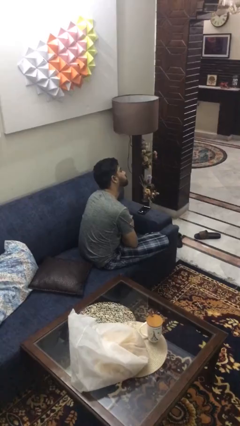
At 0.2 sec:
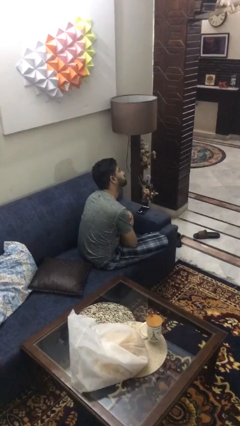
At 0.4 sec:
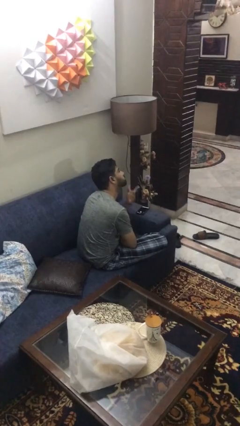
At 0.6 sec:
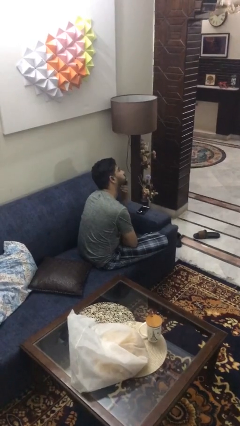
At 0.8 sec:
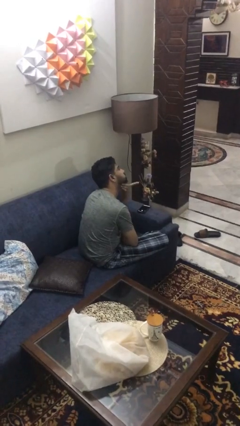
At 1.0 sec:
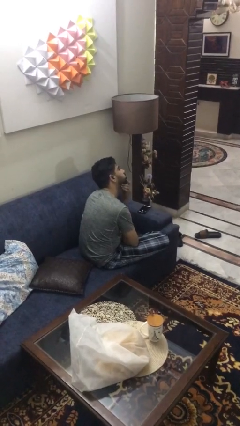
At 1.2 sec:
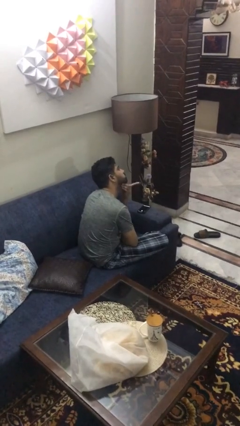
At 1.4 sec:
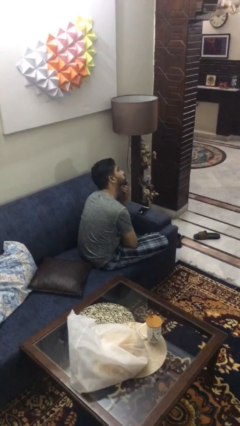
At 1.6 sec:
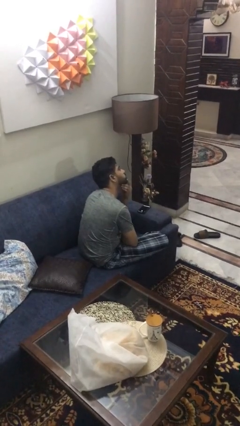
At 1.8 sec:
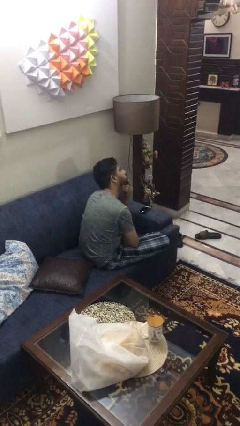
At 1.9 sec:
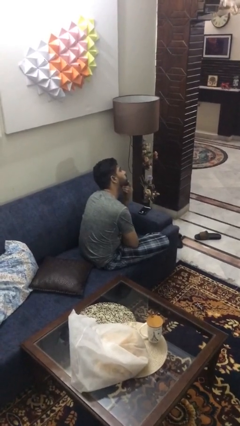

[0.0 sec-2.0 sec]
person strokes chin

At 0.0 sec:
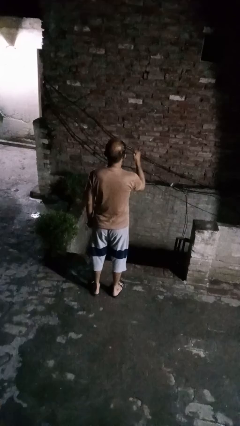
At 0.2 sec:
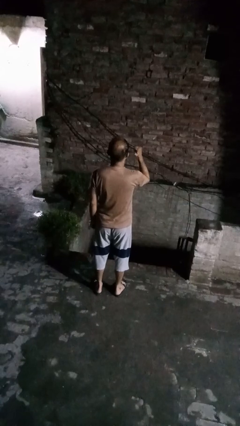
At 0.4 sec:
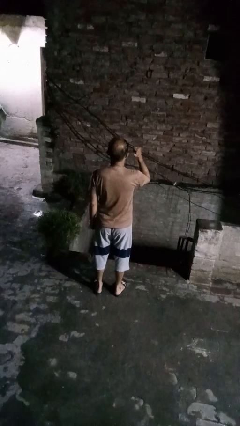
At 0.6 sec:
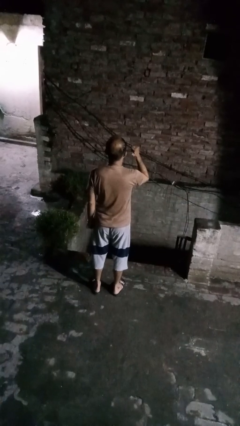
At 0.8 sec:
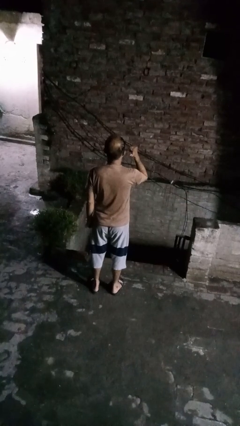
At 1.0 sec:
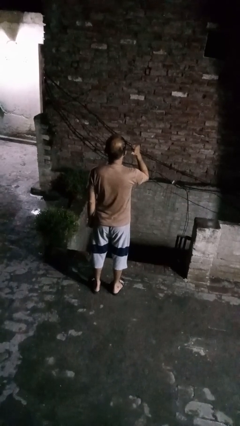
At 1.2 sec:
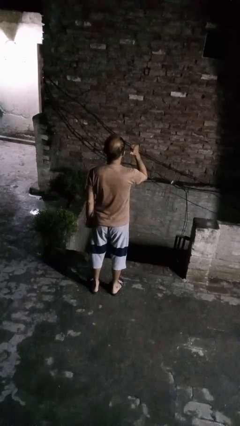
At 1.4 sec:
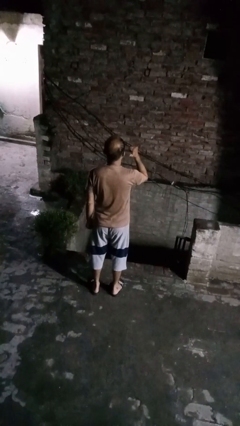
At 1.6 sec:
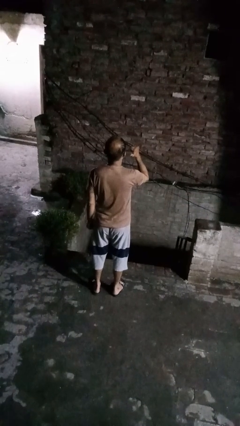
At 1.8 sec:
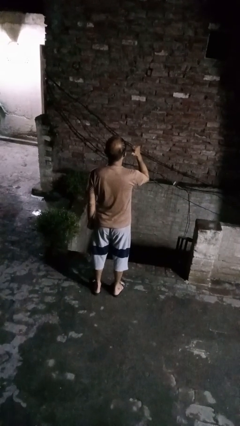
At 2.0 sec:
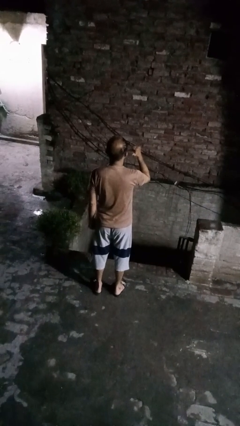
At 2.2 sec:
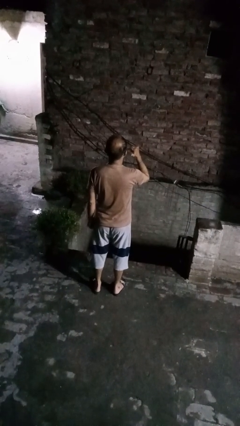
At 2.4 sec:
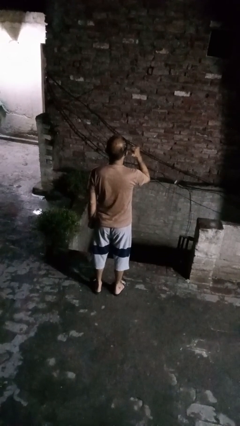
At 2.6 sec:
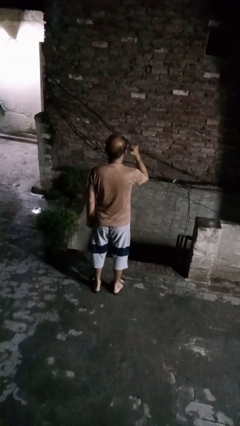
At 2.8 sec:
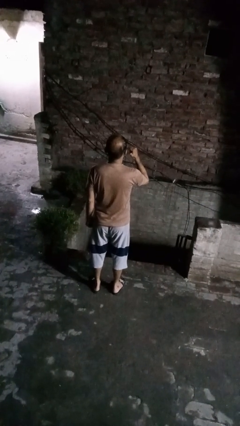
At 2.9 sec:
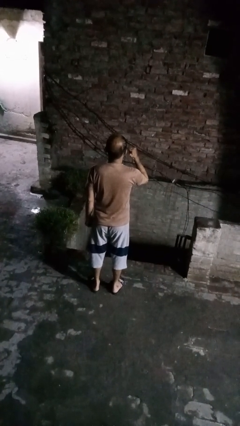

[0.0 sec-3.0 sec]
person gestures behind me

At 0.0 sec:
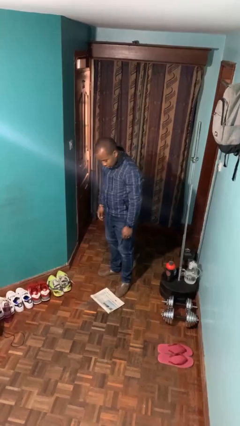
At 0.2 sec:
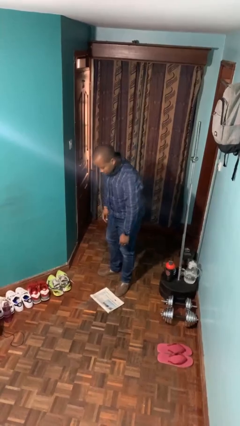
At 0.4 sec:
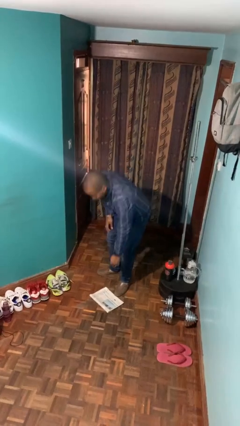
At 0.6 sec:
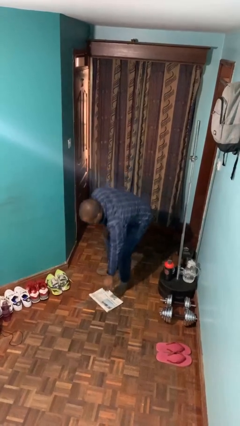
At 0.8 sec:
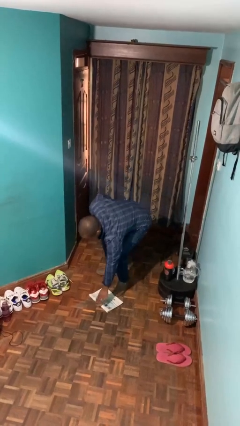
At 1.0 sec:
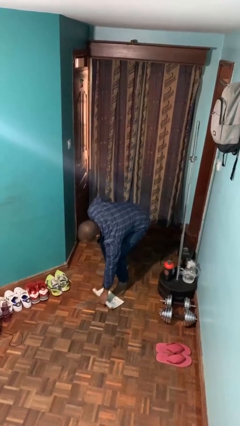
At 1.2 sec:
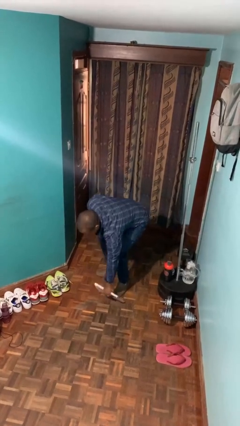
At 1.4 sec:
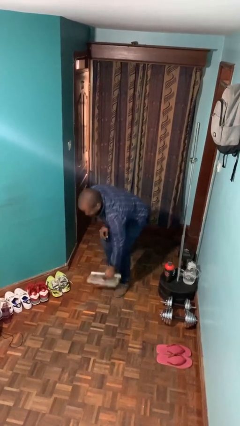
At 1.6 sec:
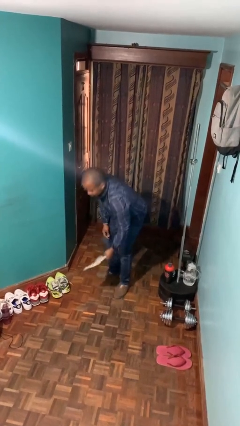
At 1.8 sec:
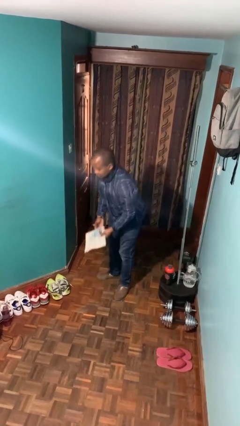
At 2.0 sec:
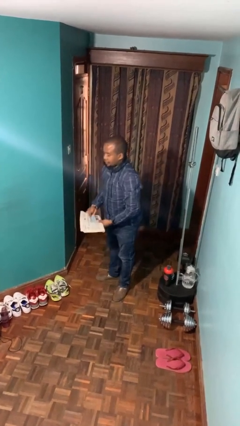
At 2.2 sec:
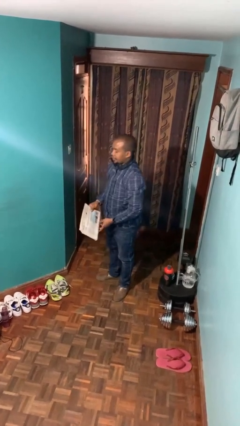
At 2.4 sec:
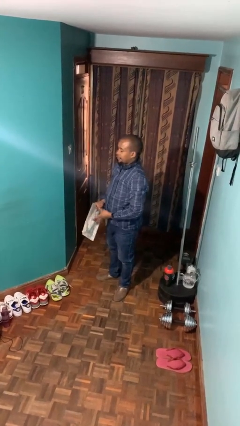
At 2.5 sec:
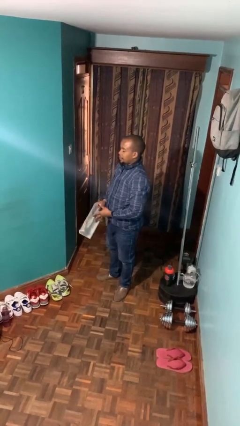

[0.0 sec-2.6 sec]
person picks up object from floor

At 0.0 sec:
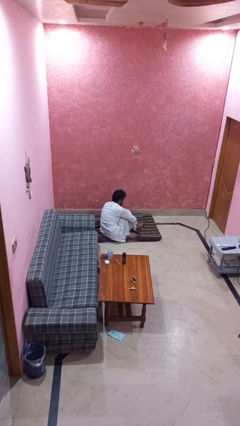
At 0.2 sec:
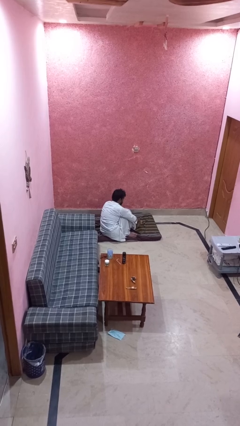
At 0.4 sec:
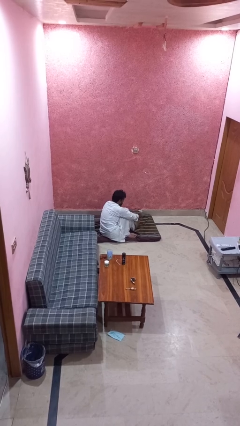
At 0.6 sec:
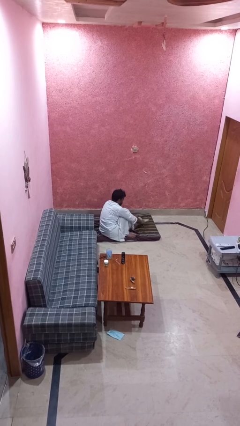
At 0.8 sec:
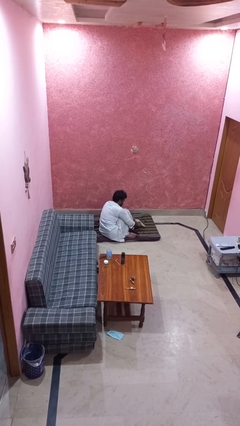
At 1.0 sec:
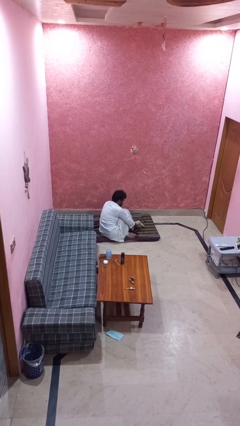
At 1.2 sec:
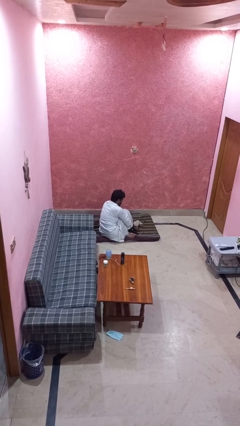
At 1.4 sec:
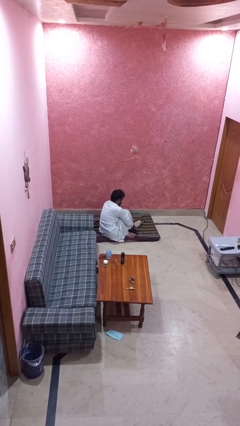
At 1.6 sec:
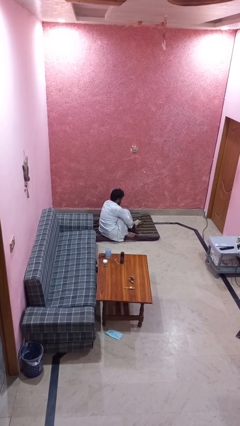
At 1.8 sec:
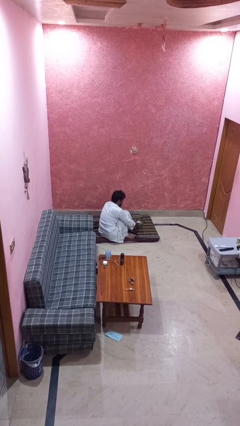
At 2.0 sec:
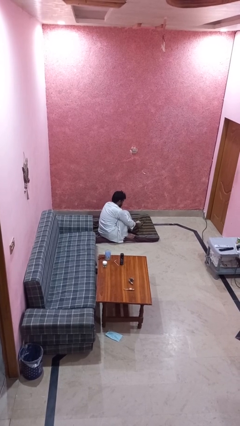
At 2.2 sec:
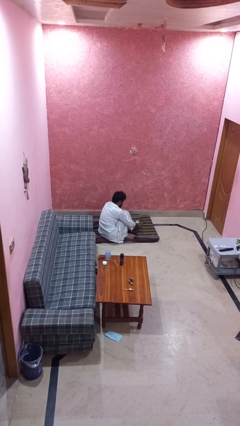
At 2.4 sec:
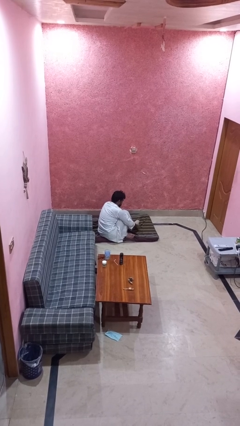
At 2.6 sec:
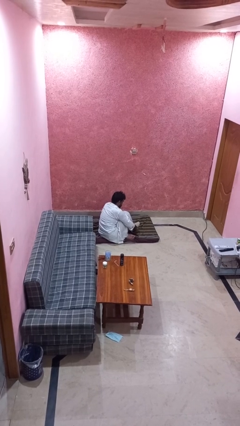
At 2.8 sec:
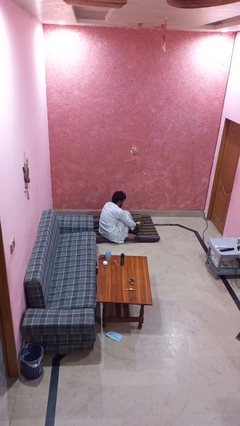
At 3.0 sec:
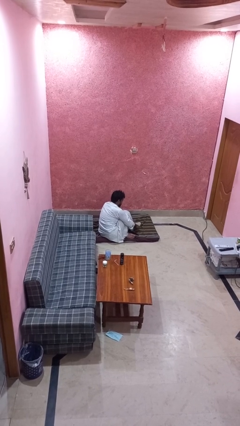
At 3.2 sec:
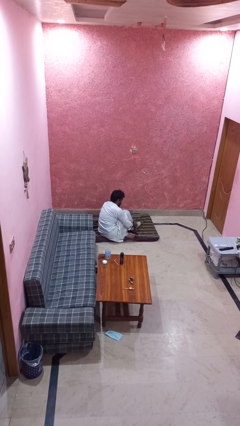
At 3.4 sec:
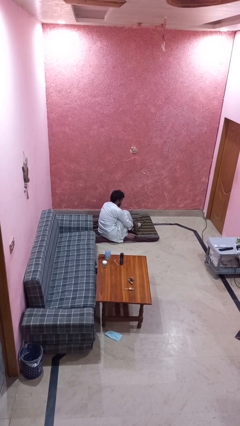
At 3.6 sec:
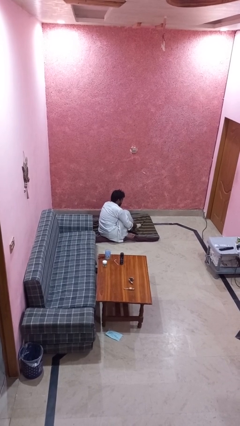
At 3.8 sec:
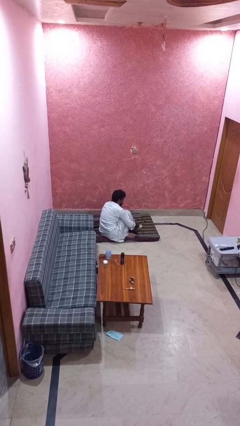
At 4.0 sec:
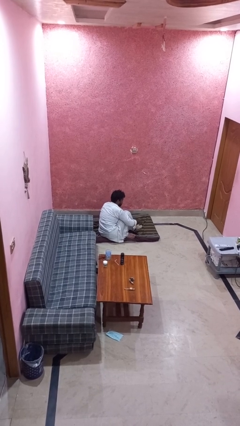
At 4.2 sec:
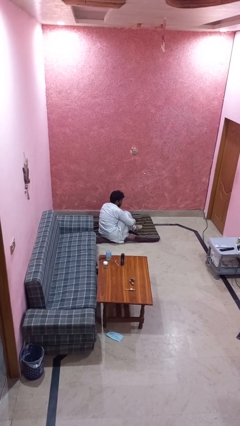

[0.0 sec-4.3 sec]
person puts on socks

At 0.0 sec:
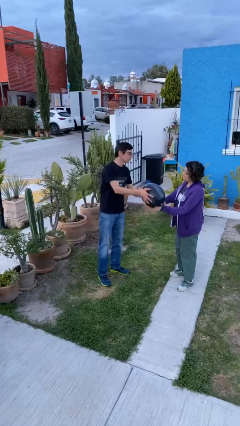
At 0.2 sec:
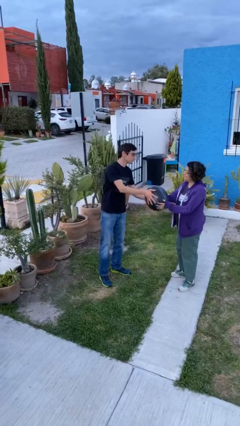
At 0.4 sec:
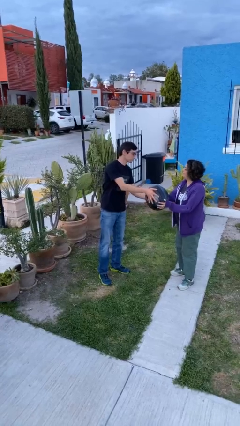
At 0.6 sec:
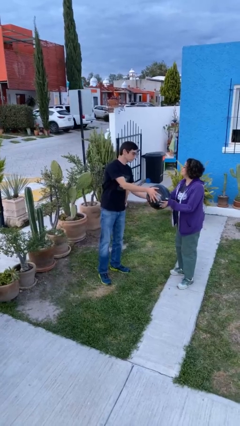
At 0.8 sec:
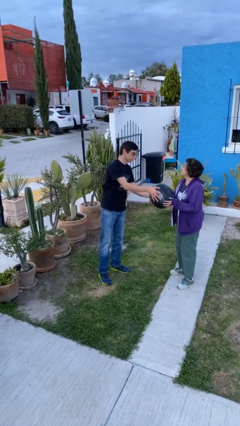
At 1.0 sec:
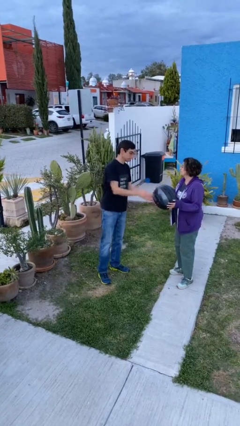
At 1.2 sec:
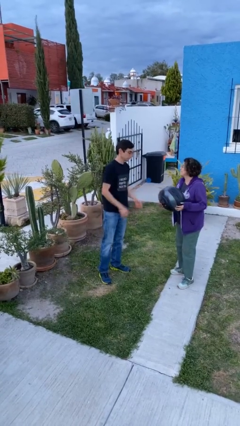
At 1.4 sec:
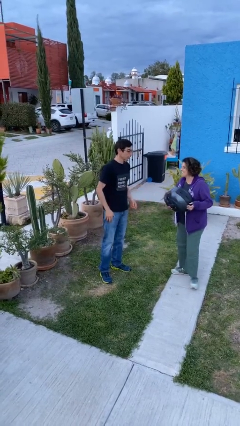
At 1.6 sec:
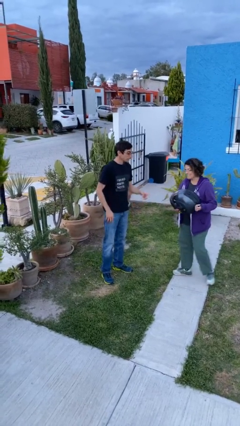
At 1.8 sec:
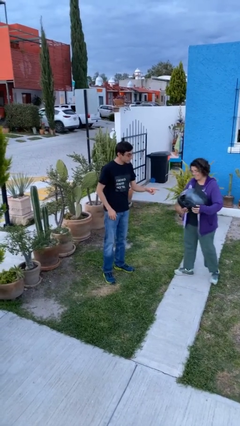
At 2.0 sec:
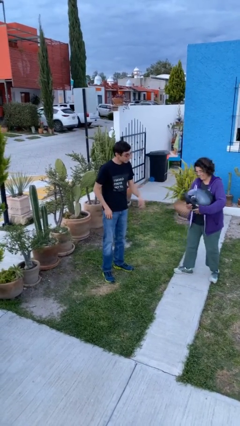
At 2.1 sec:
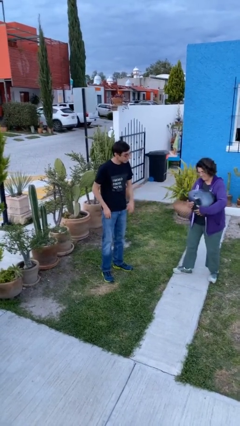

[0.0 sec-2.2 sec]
person transfers object to person

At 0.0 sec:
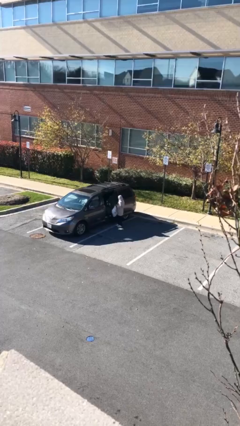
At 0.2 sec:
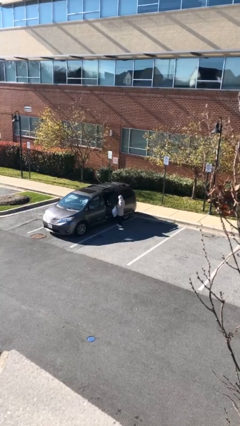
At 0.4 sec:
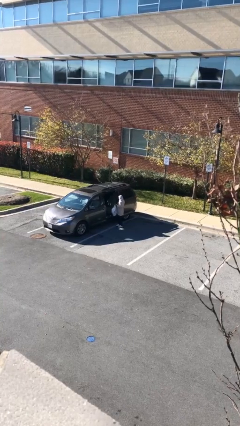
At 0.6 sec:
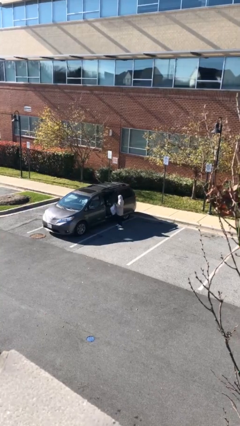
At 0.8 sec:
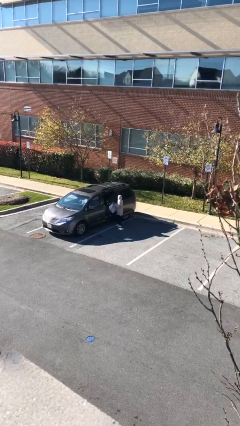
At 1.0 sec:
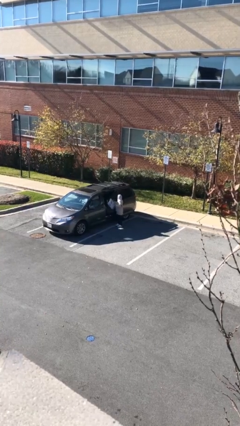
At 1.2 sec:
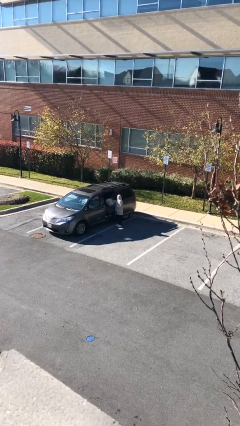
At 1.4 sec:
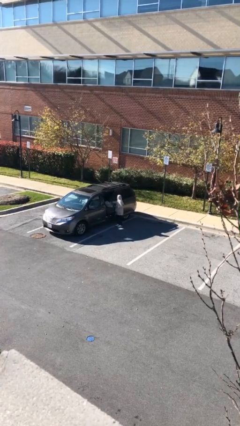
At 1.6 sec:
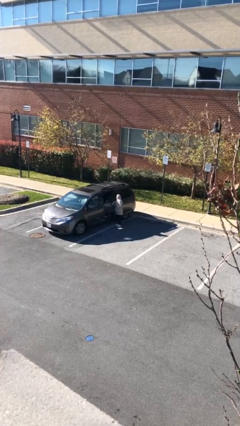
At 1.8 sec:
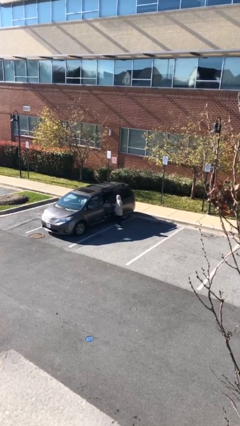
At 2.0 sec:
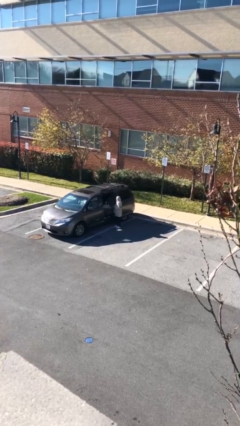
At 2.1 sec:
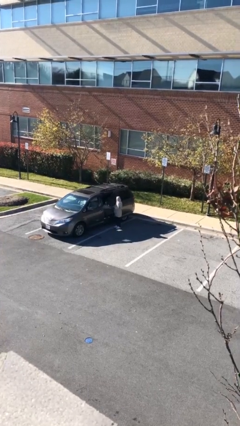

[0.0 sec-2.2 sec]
person loads car

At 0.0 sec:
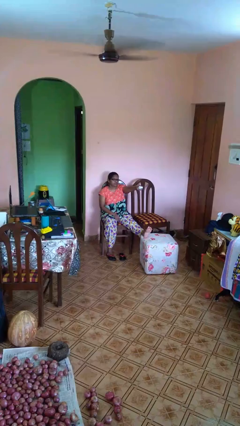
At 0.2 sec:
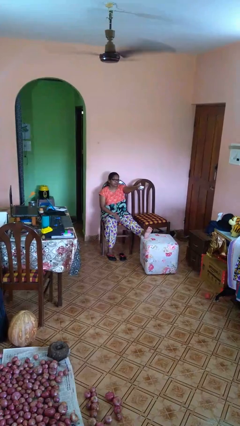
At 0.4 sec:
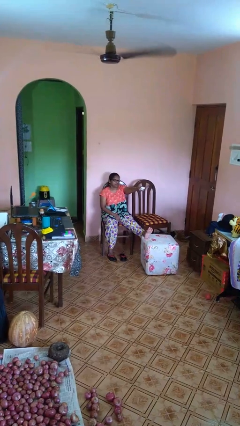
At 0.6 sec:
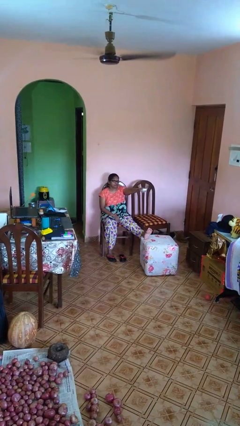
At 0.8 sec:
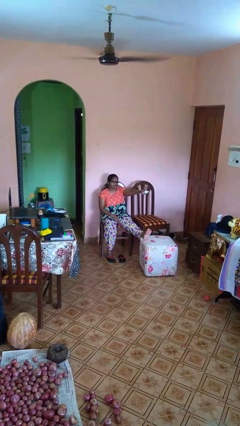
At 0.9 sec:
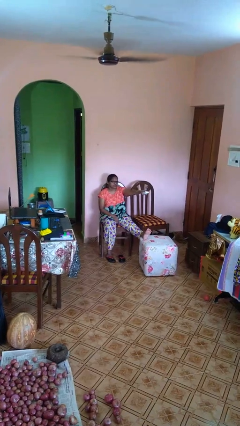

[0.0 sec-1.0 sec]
person uses television remote
